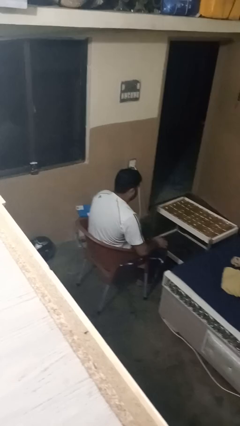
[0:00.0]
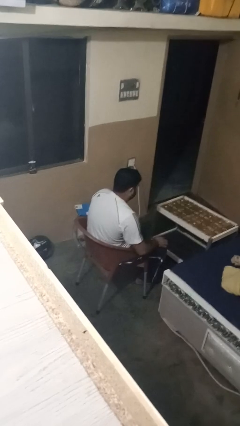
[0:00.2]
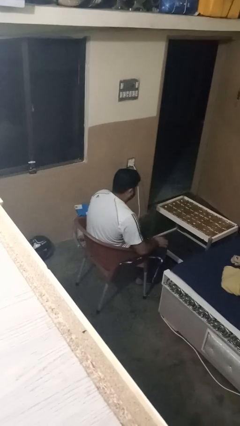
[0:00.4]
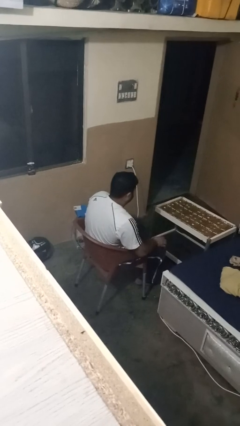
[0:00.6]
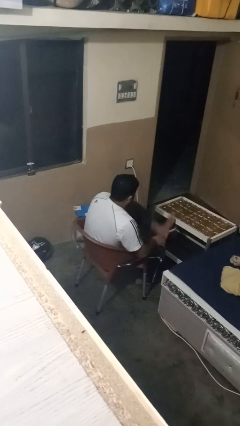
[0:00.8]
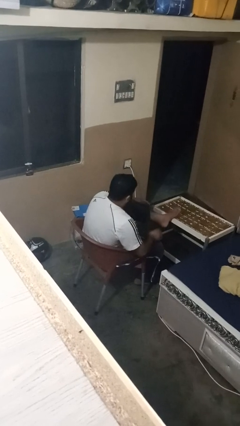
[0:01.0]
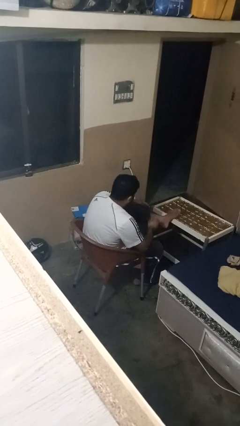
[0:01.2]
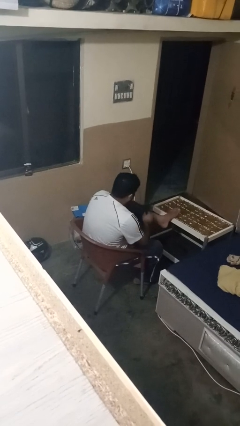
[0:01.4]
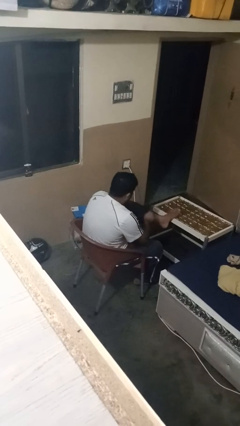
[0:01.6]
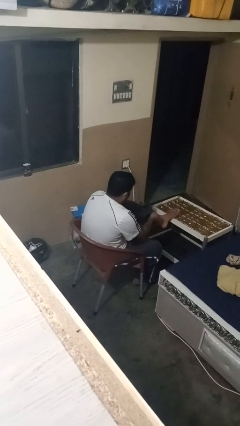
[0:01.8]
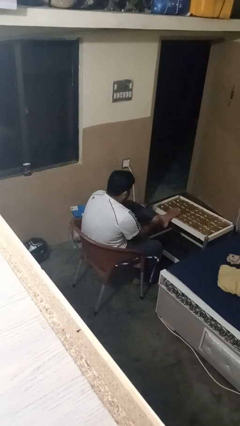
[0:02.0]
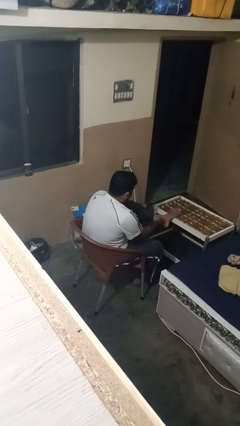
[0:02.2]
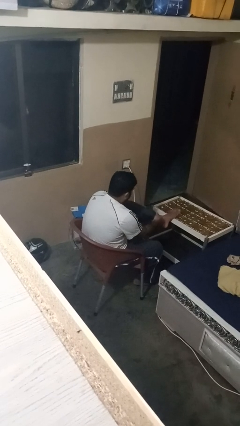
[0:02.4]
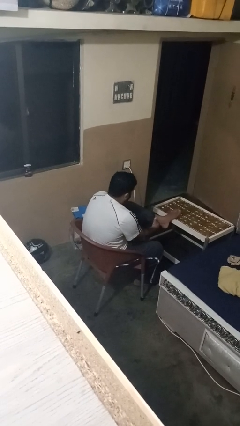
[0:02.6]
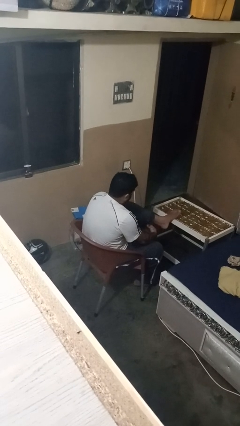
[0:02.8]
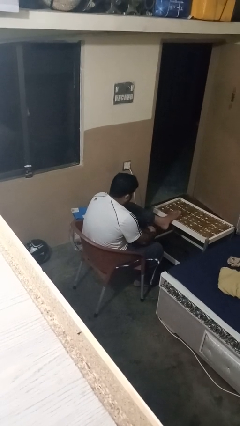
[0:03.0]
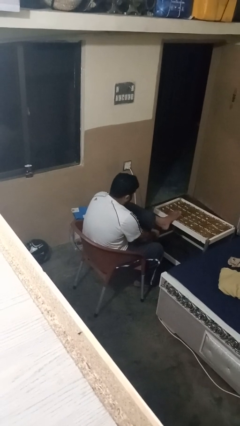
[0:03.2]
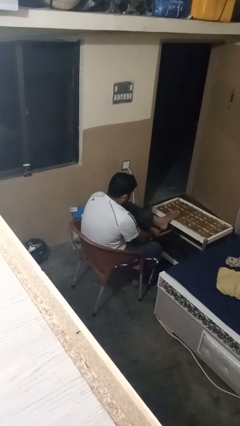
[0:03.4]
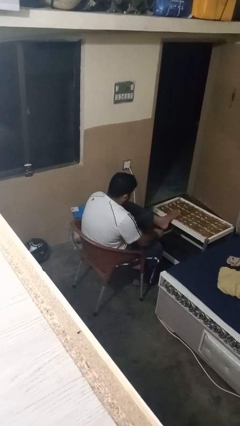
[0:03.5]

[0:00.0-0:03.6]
person hikes up pants

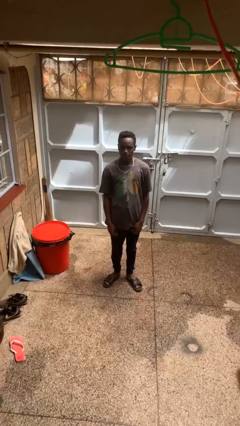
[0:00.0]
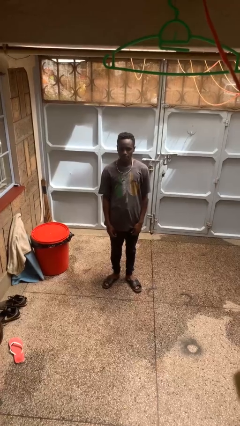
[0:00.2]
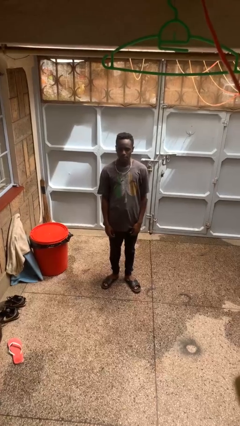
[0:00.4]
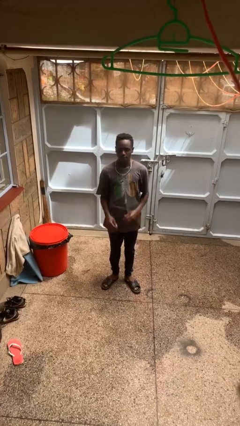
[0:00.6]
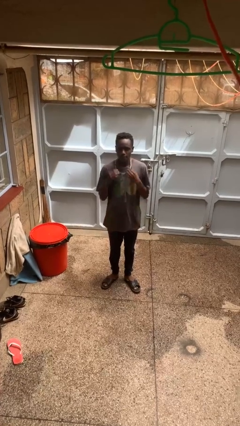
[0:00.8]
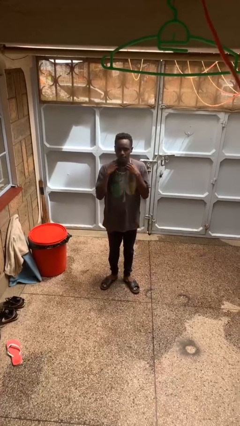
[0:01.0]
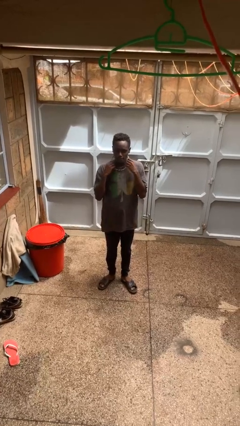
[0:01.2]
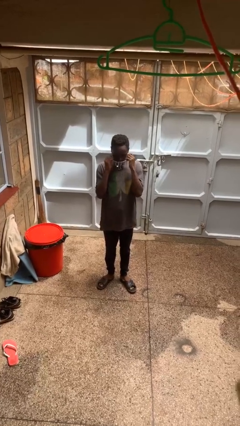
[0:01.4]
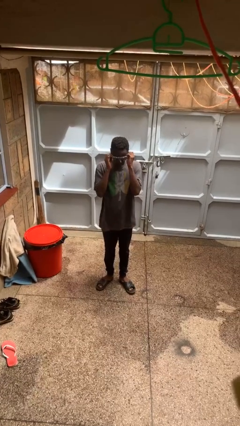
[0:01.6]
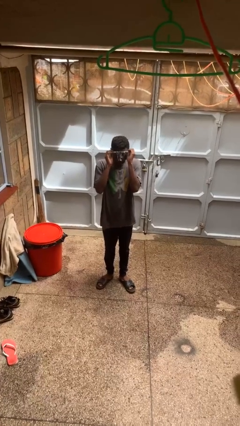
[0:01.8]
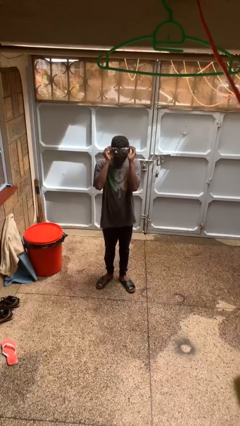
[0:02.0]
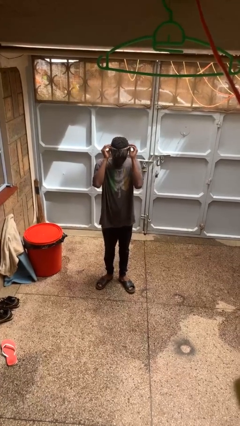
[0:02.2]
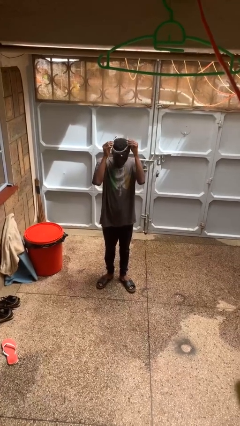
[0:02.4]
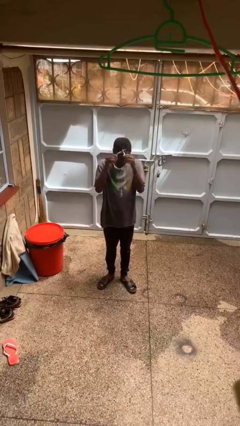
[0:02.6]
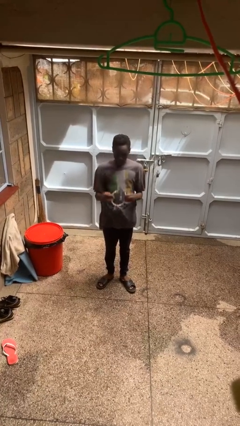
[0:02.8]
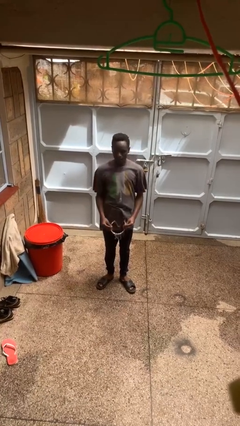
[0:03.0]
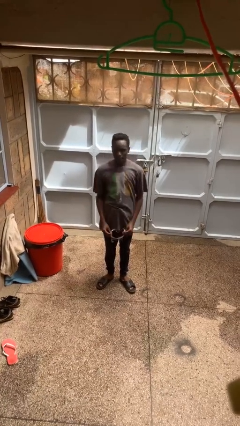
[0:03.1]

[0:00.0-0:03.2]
person takes off necklace

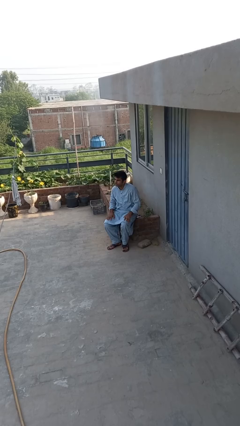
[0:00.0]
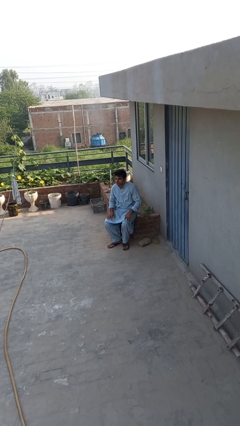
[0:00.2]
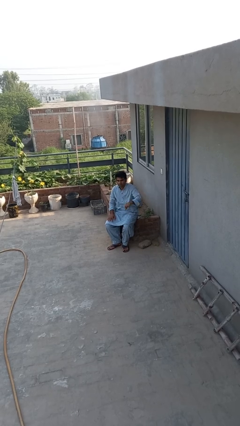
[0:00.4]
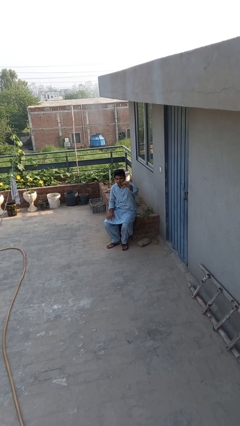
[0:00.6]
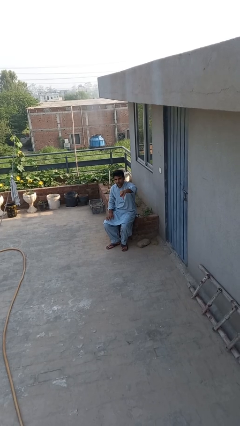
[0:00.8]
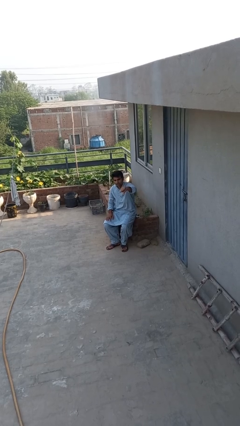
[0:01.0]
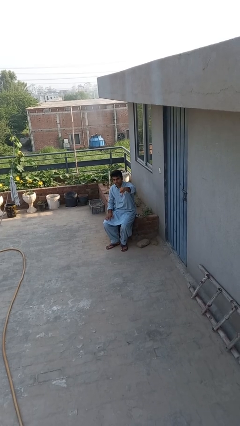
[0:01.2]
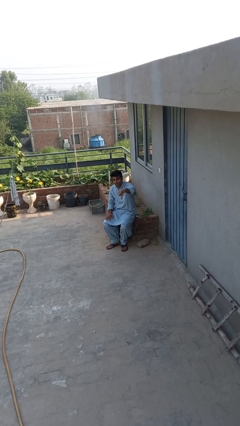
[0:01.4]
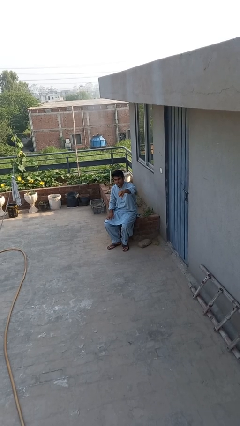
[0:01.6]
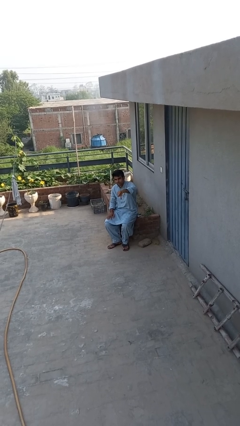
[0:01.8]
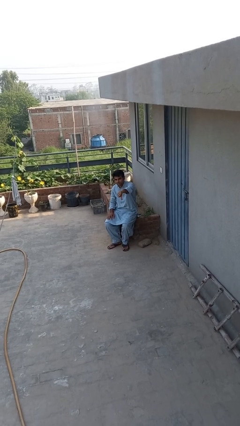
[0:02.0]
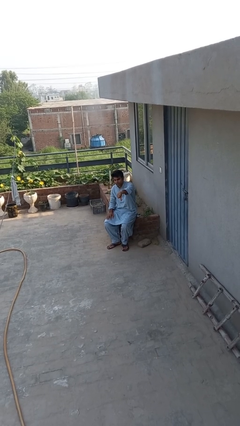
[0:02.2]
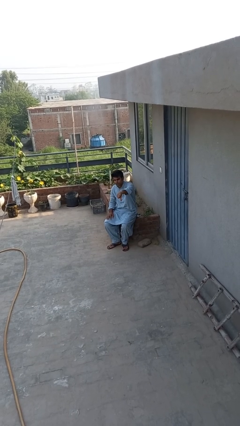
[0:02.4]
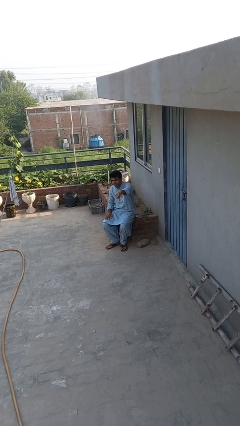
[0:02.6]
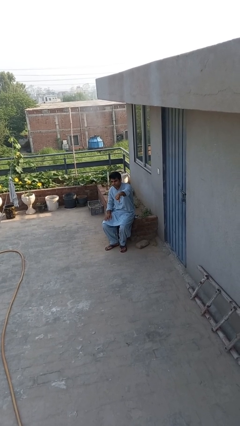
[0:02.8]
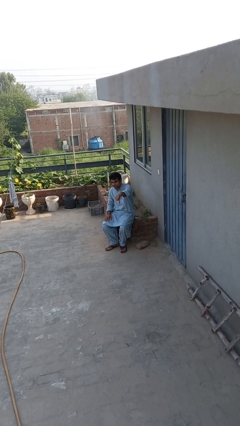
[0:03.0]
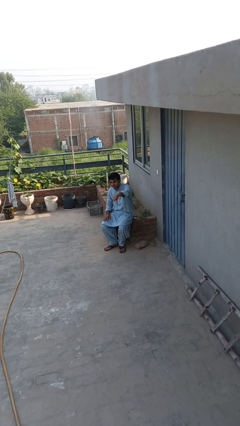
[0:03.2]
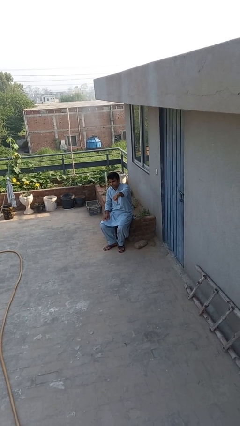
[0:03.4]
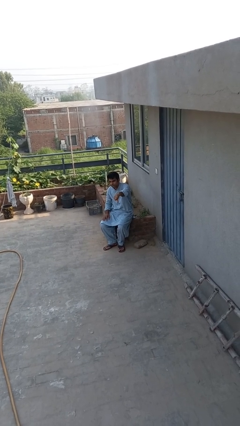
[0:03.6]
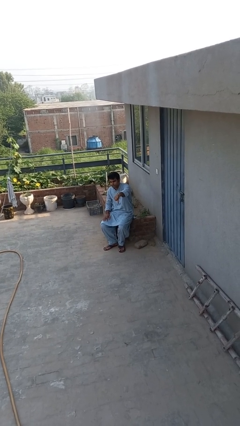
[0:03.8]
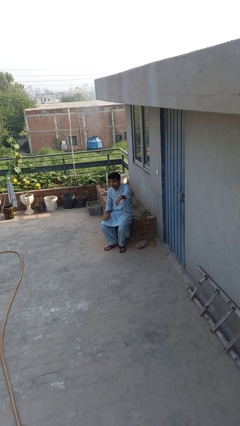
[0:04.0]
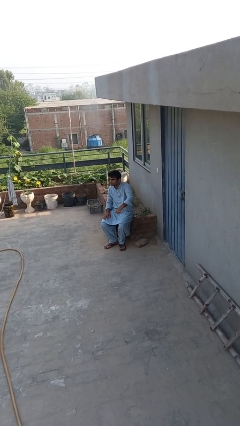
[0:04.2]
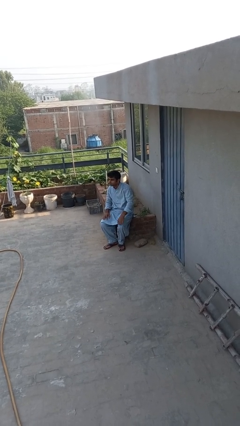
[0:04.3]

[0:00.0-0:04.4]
person gestures thumbs down

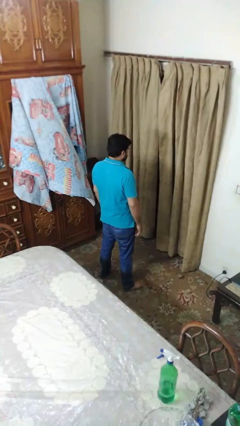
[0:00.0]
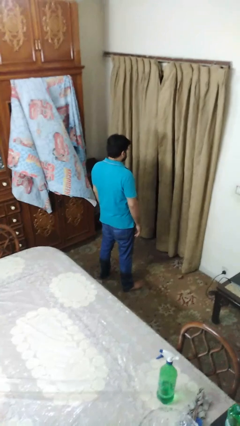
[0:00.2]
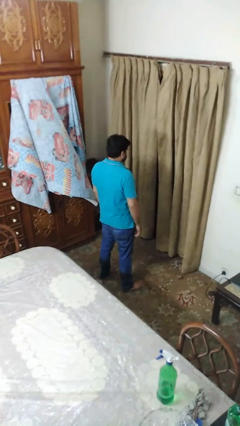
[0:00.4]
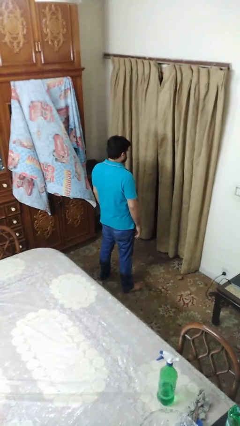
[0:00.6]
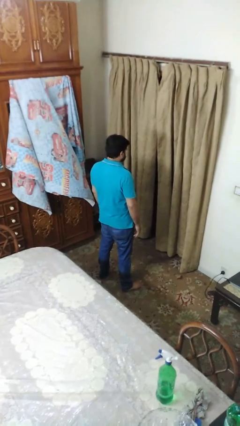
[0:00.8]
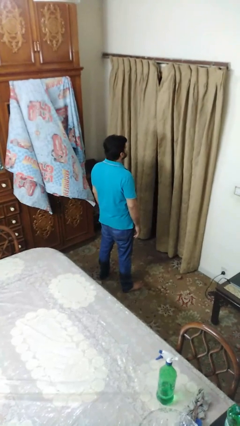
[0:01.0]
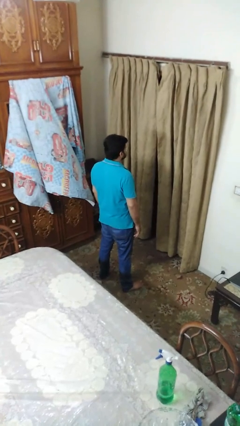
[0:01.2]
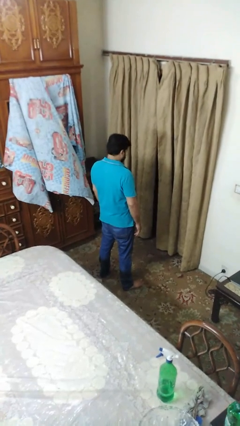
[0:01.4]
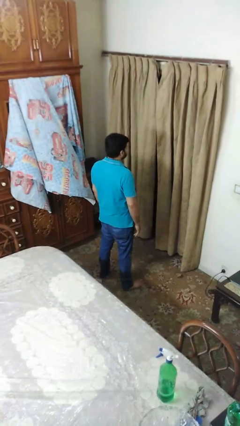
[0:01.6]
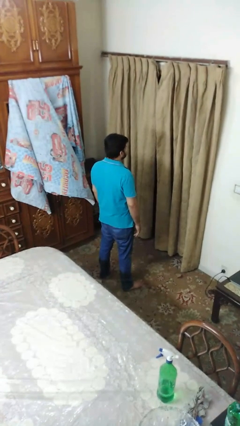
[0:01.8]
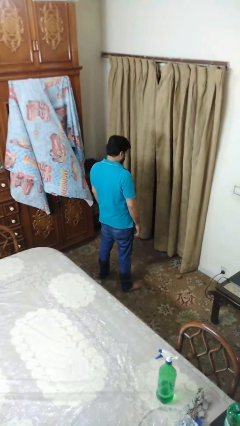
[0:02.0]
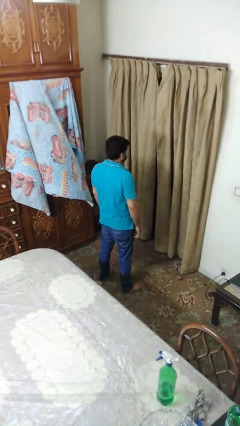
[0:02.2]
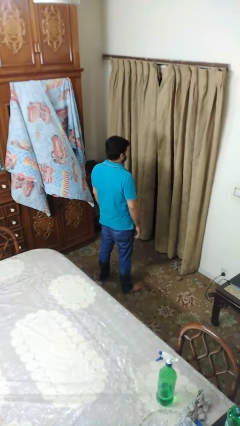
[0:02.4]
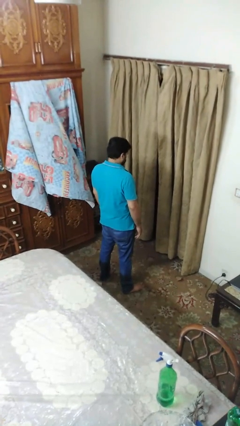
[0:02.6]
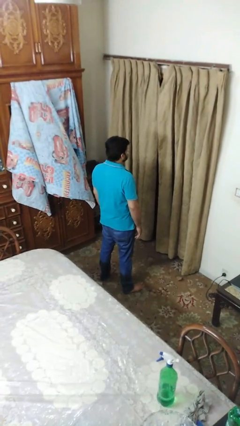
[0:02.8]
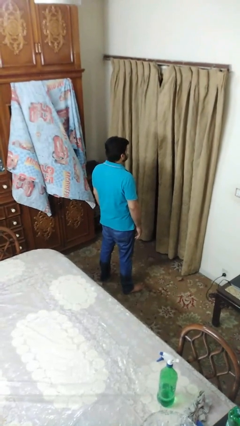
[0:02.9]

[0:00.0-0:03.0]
person nods head

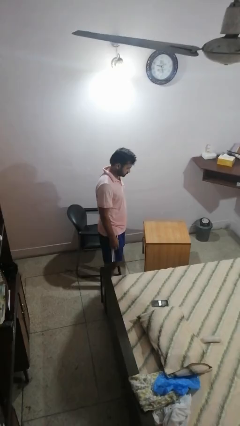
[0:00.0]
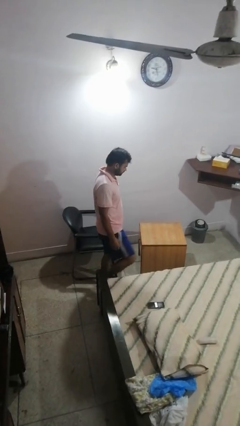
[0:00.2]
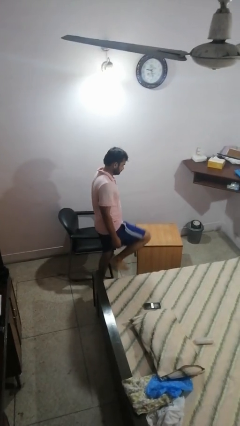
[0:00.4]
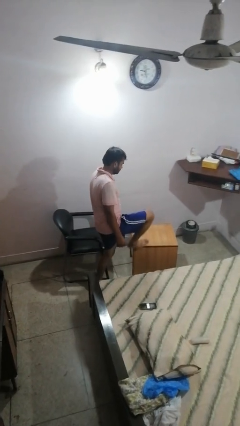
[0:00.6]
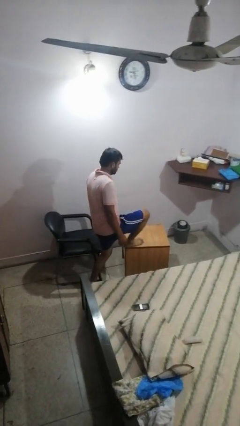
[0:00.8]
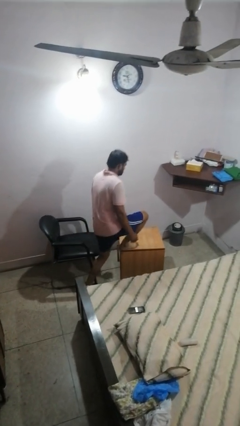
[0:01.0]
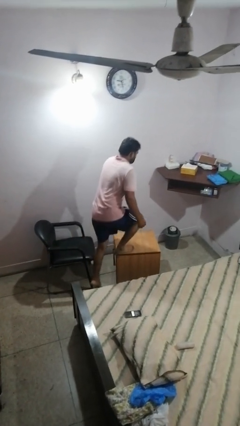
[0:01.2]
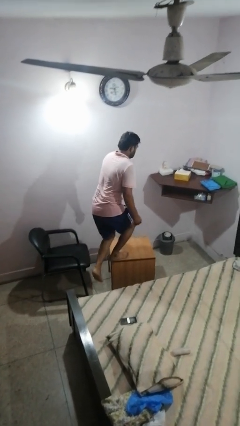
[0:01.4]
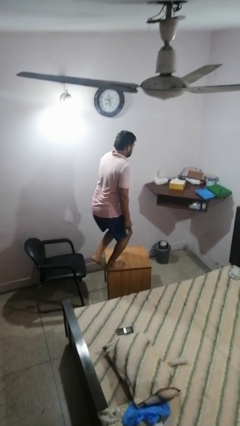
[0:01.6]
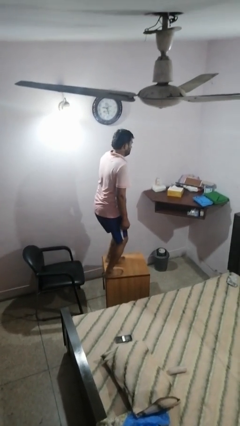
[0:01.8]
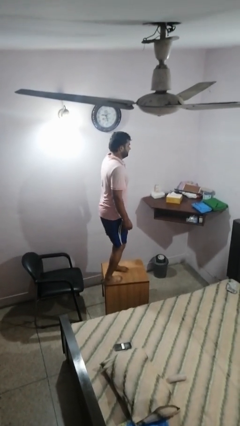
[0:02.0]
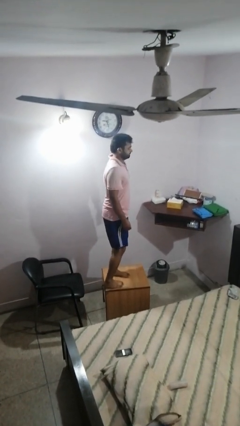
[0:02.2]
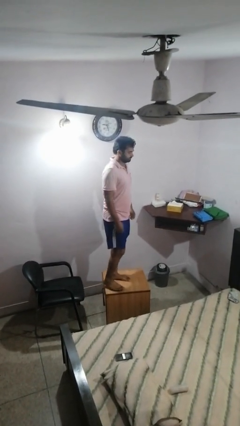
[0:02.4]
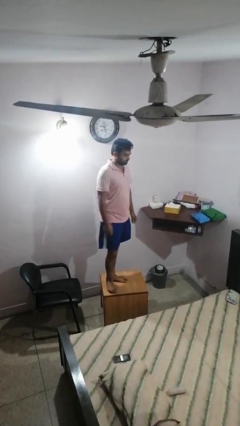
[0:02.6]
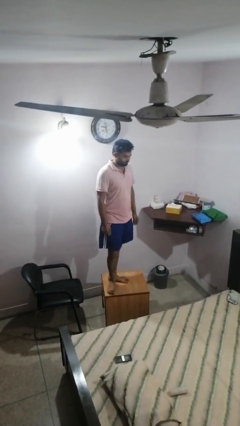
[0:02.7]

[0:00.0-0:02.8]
person climbs on table

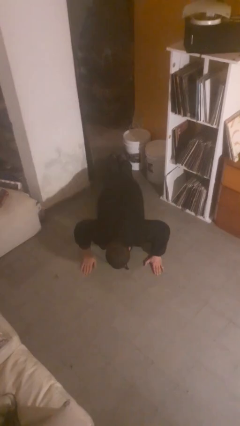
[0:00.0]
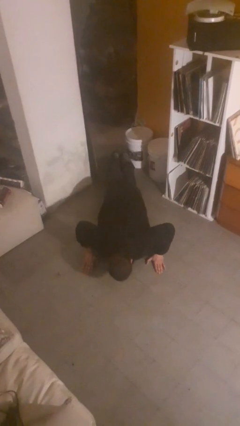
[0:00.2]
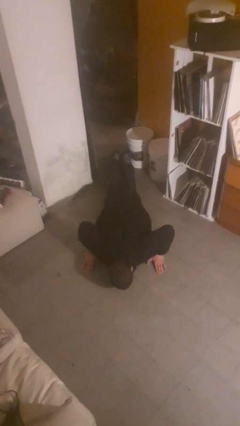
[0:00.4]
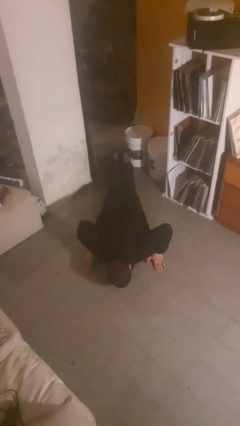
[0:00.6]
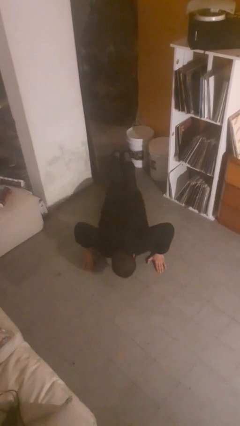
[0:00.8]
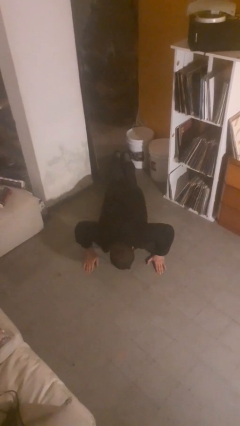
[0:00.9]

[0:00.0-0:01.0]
person exercises with pushup
